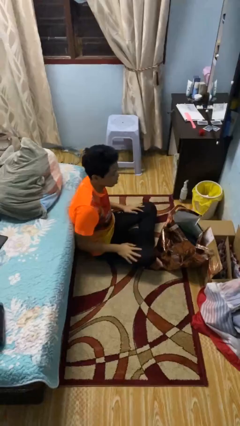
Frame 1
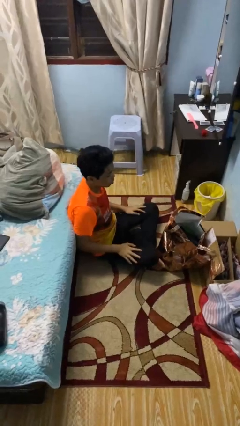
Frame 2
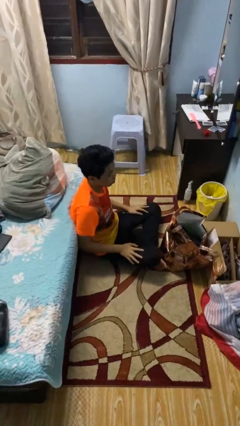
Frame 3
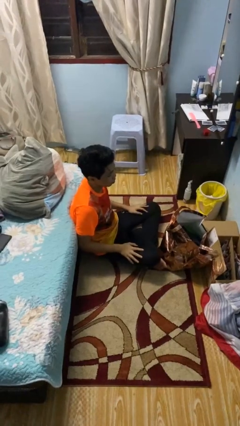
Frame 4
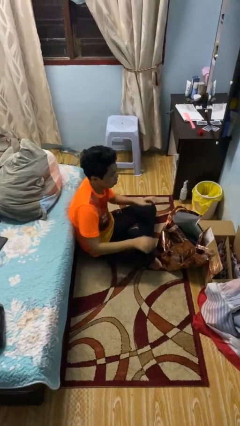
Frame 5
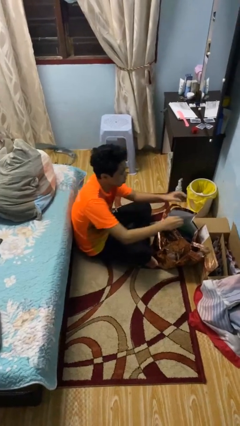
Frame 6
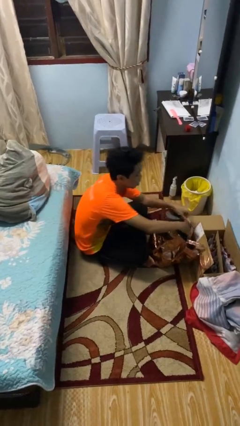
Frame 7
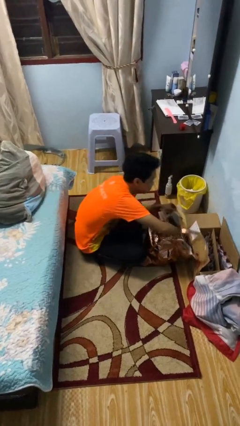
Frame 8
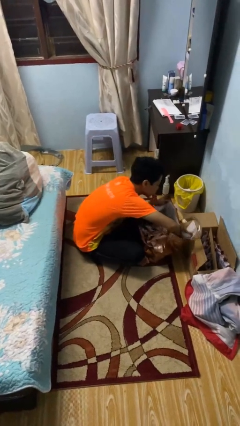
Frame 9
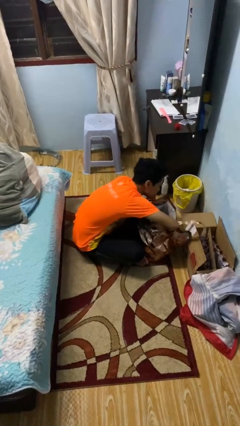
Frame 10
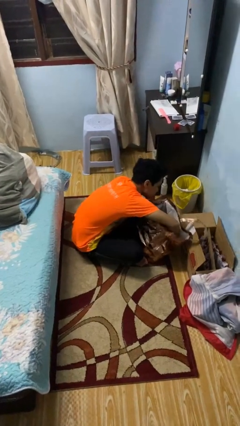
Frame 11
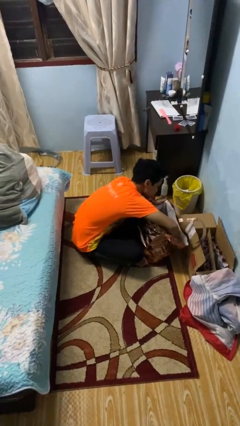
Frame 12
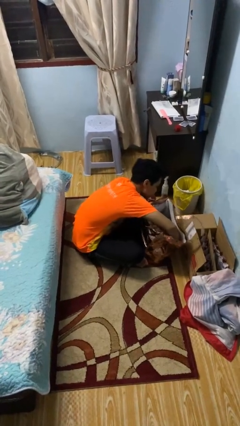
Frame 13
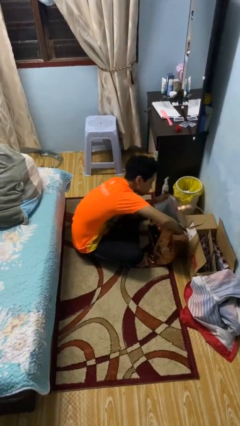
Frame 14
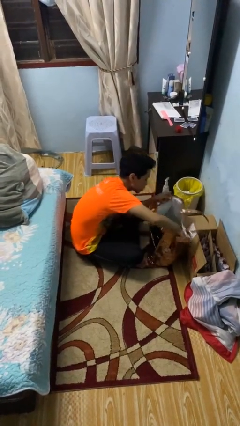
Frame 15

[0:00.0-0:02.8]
person searches in bag

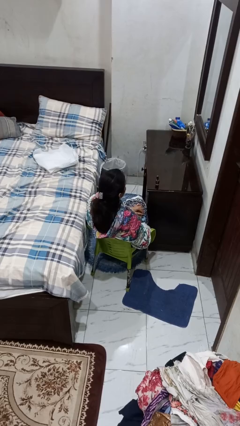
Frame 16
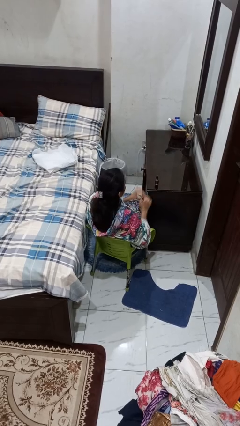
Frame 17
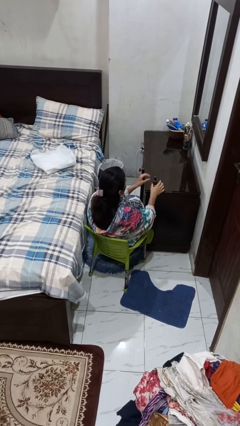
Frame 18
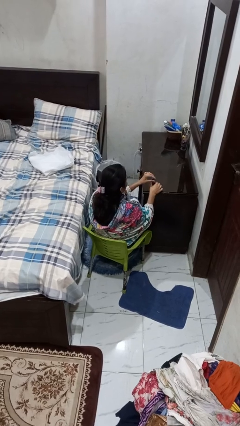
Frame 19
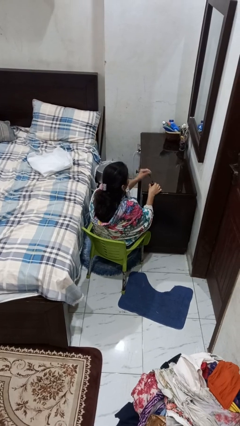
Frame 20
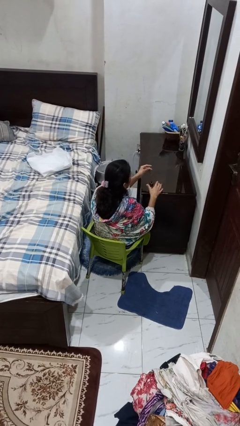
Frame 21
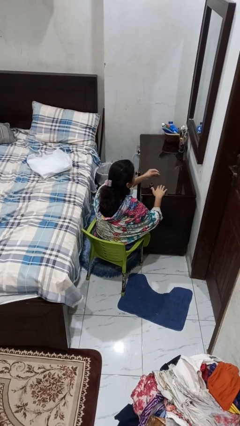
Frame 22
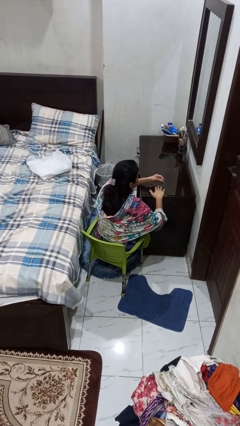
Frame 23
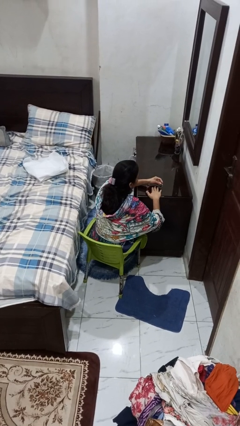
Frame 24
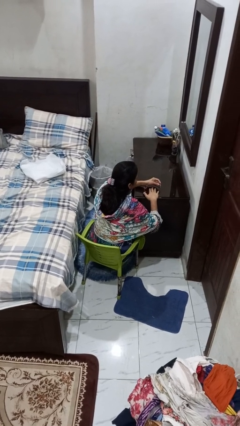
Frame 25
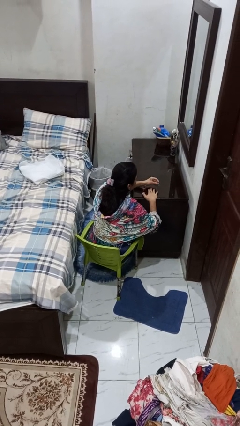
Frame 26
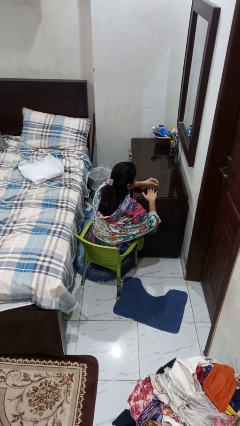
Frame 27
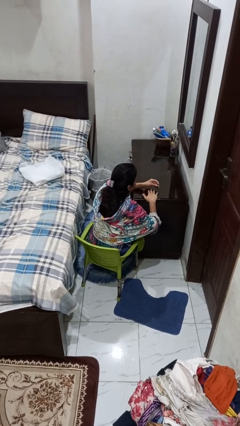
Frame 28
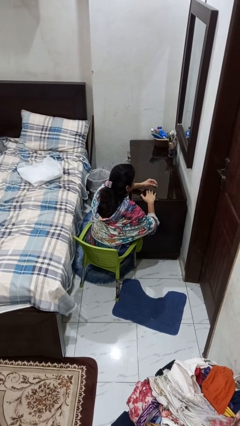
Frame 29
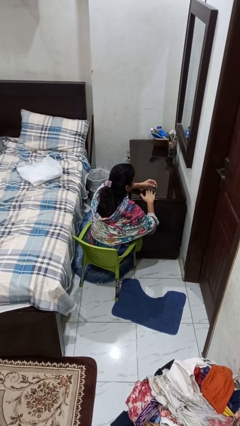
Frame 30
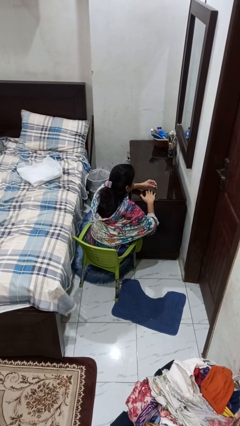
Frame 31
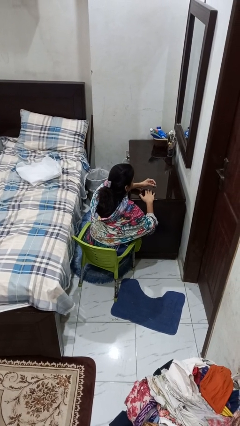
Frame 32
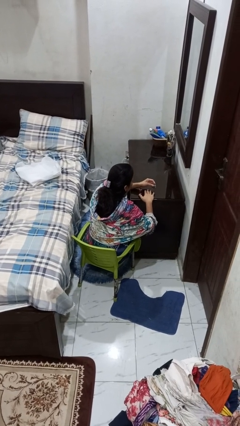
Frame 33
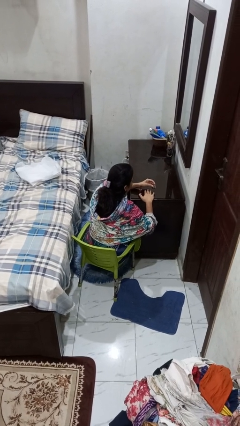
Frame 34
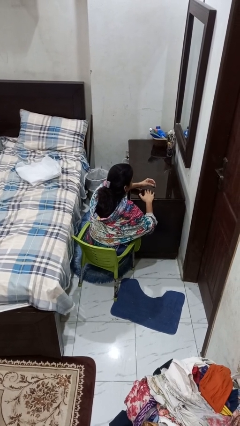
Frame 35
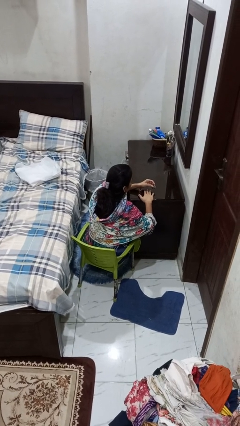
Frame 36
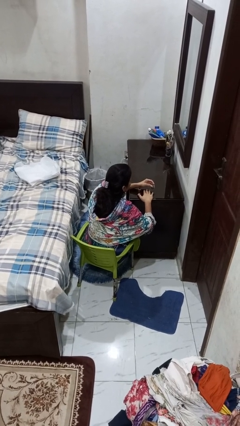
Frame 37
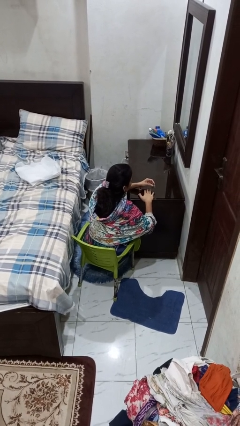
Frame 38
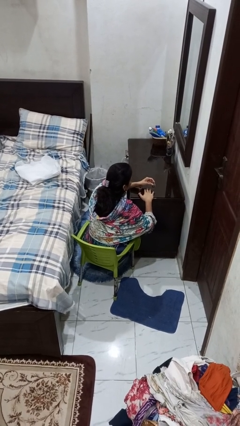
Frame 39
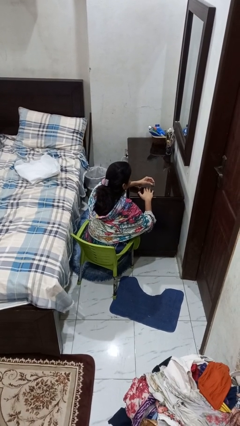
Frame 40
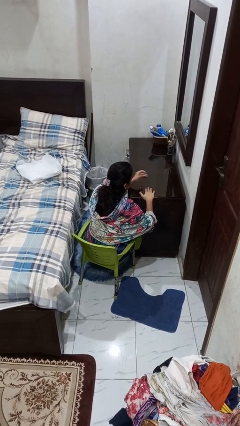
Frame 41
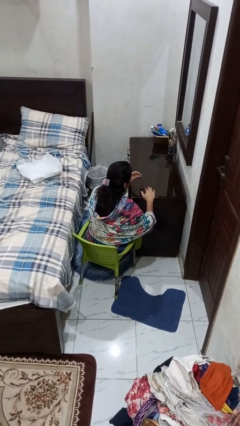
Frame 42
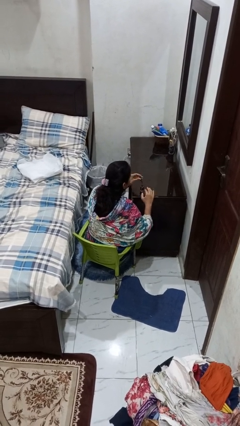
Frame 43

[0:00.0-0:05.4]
person paints fingernails

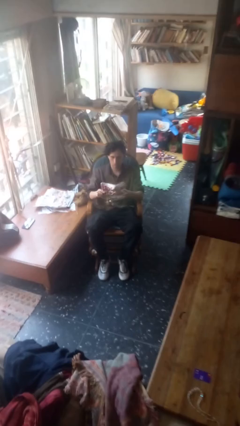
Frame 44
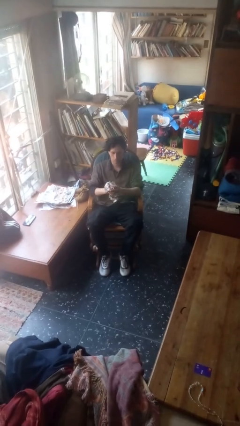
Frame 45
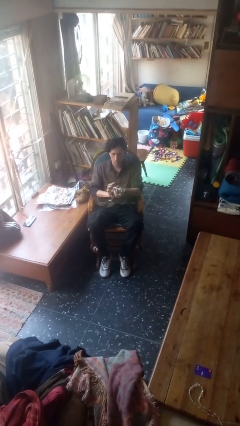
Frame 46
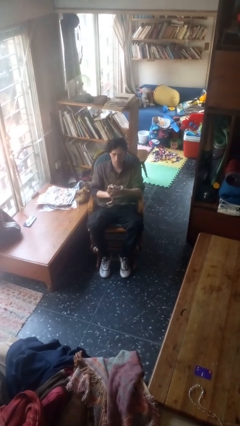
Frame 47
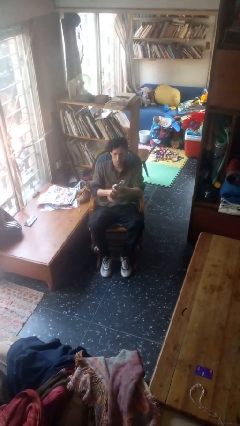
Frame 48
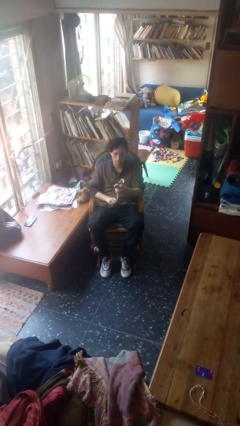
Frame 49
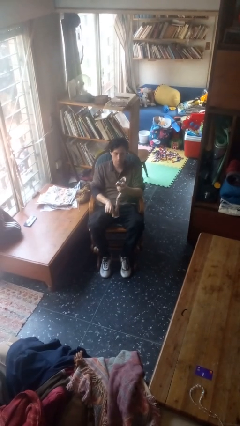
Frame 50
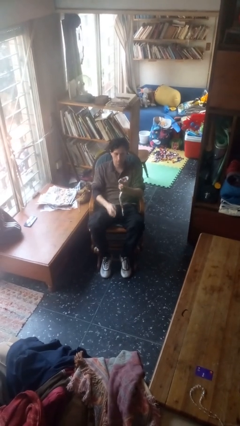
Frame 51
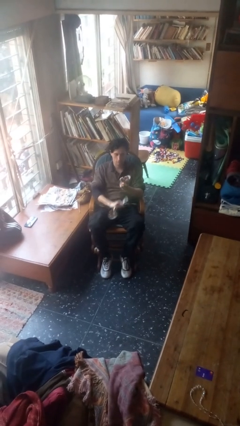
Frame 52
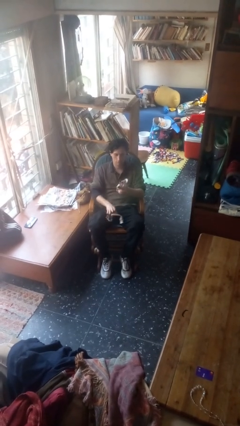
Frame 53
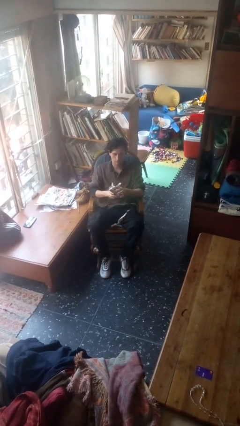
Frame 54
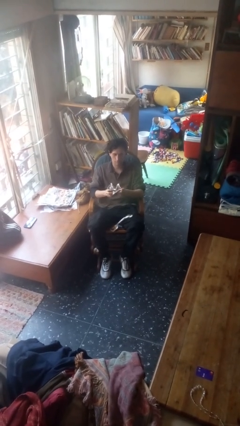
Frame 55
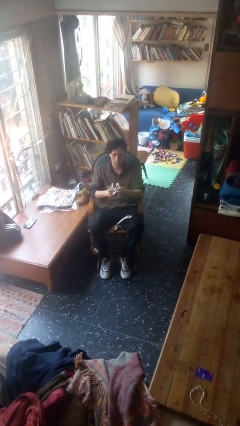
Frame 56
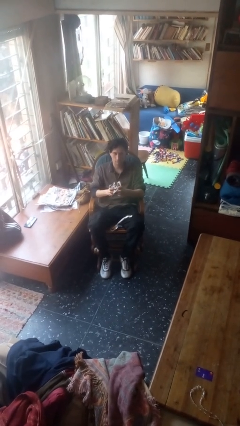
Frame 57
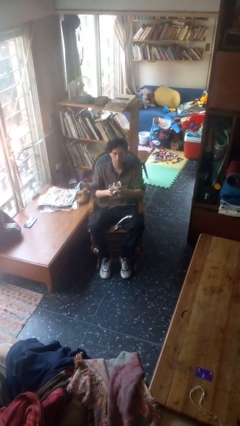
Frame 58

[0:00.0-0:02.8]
person crumples paper

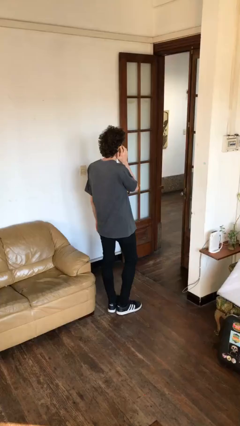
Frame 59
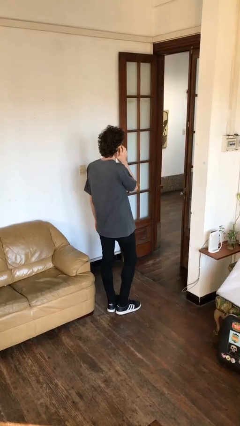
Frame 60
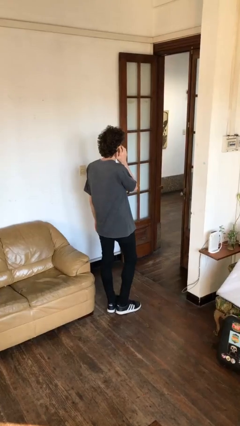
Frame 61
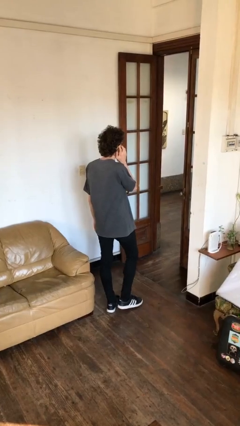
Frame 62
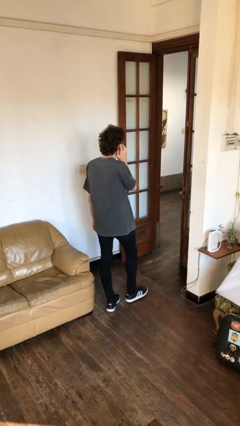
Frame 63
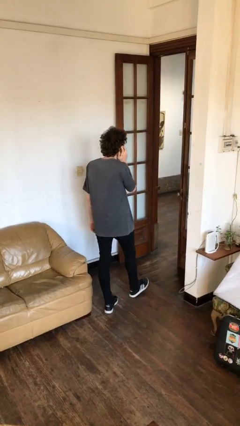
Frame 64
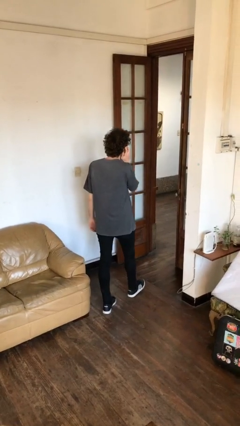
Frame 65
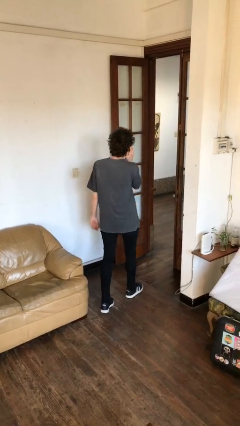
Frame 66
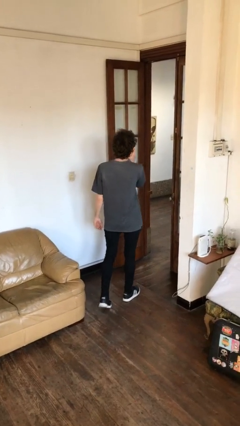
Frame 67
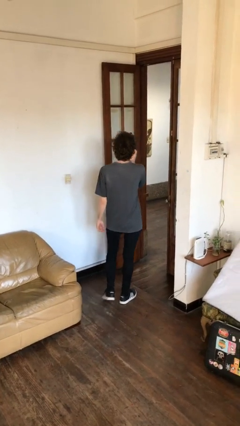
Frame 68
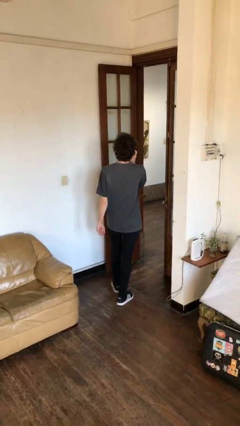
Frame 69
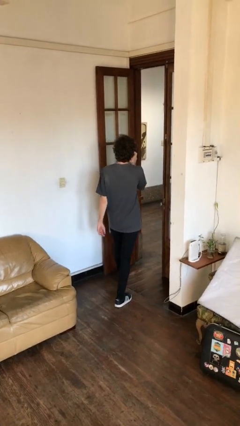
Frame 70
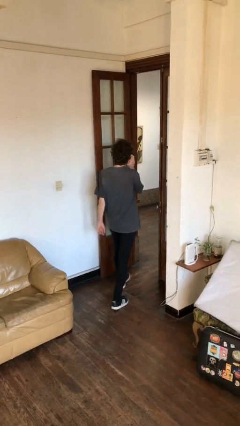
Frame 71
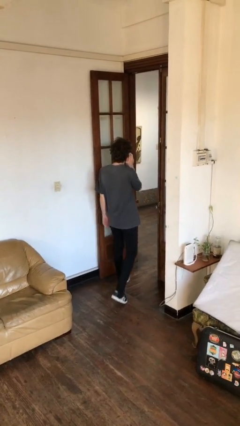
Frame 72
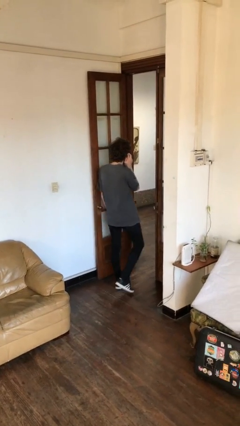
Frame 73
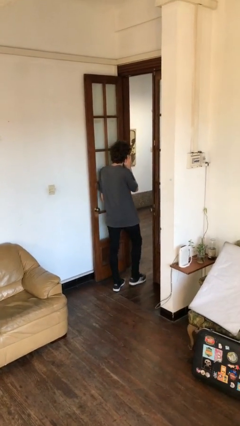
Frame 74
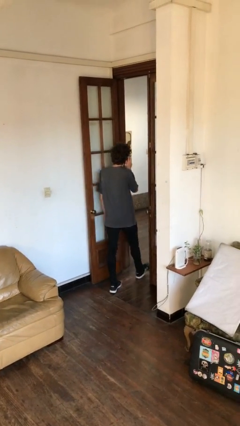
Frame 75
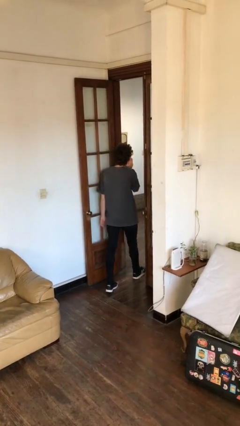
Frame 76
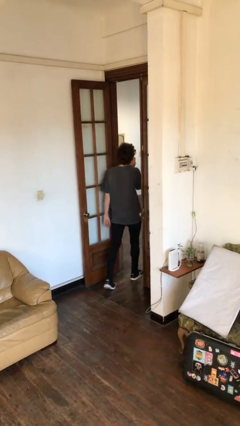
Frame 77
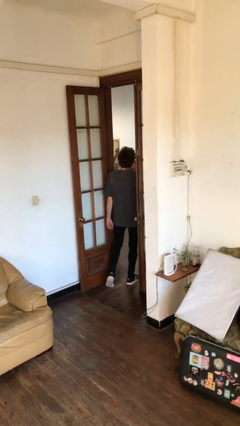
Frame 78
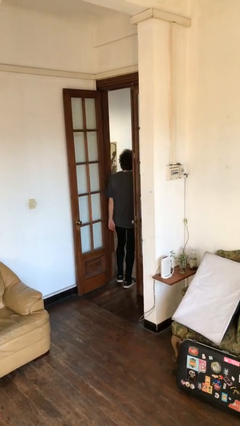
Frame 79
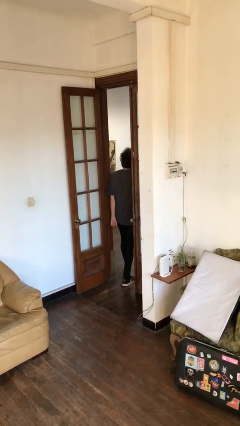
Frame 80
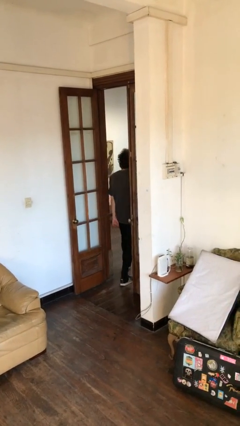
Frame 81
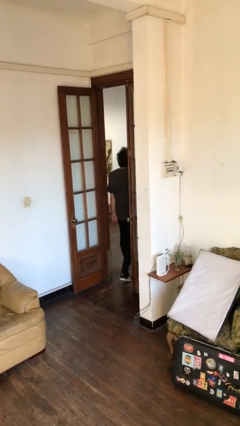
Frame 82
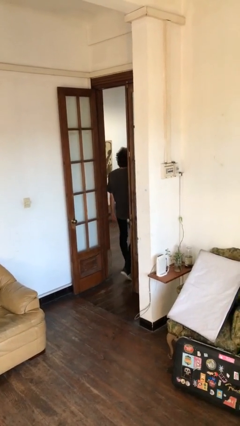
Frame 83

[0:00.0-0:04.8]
person exits scene through structure

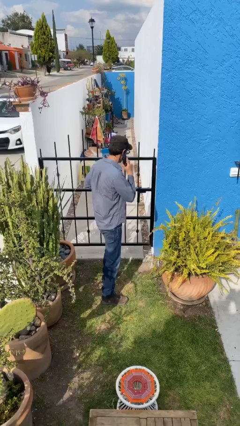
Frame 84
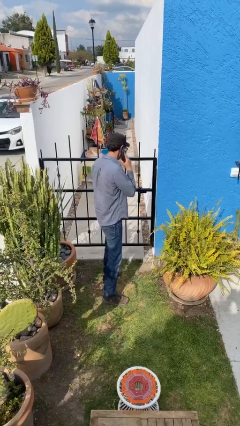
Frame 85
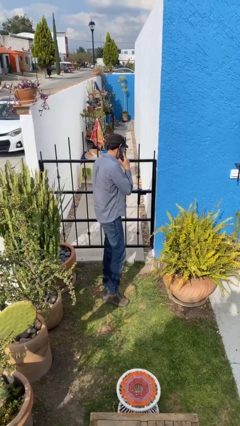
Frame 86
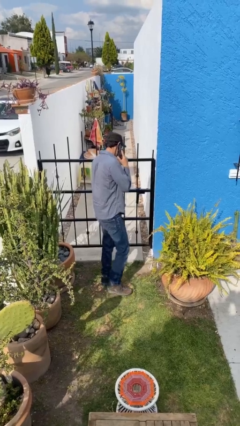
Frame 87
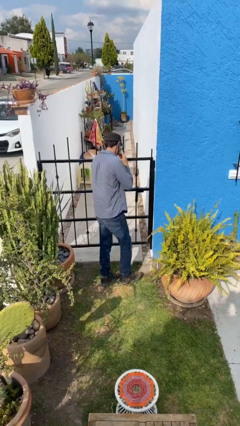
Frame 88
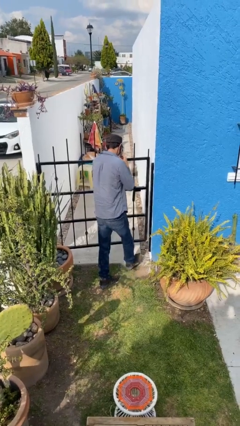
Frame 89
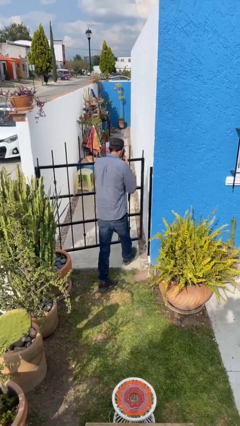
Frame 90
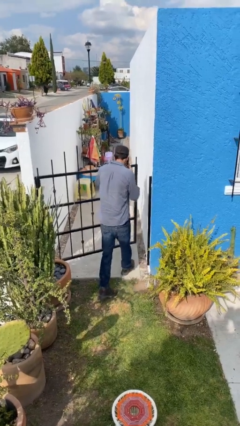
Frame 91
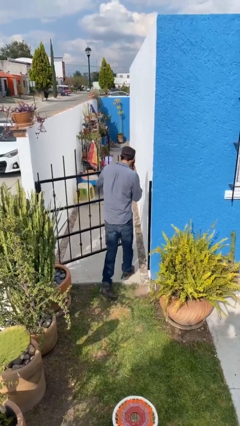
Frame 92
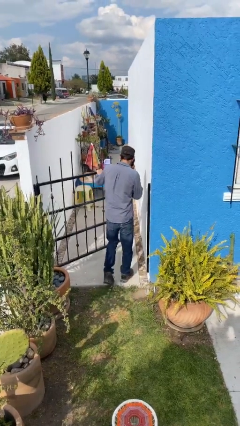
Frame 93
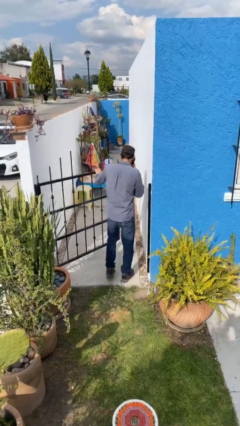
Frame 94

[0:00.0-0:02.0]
person opens facility door
